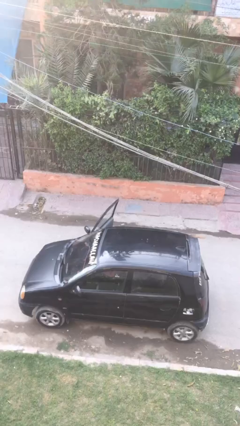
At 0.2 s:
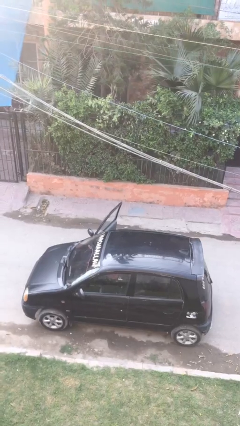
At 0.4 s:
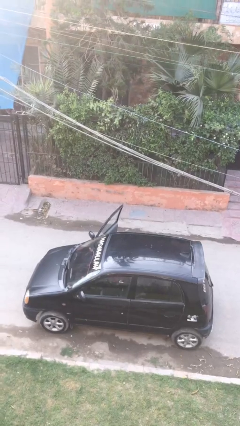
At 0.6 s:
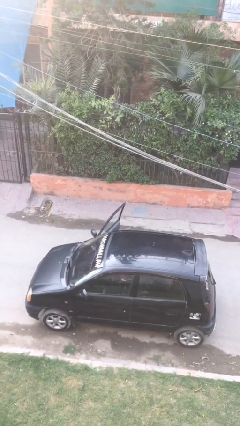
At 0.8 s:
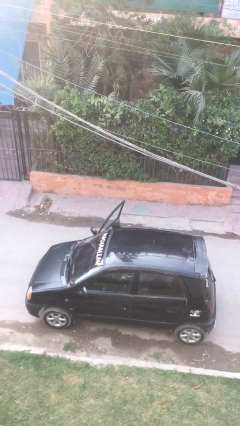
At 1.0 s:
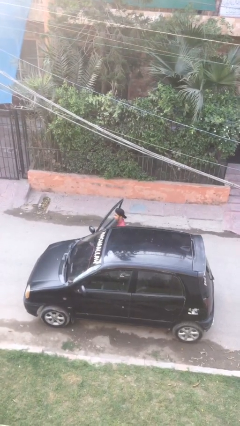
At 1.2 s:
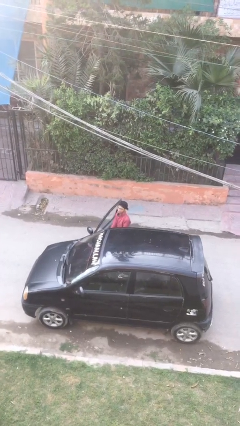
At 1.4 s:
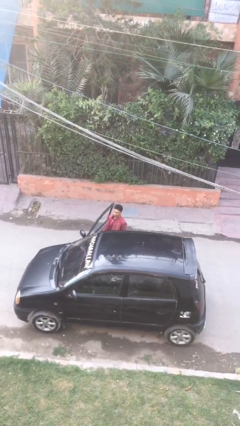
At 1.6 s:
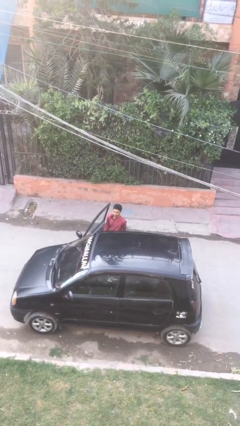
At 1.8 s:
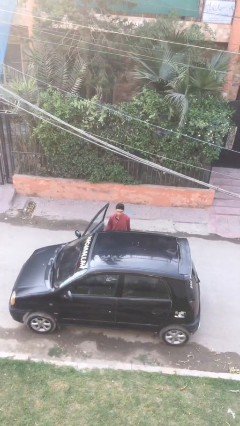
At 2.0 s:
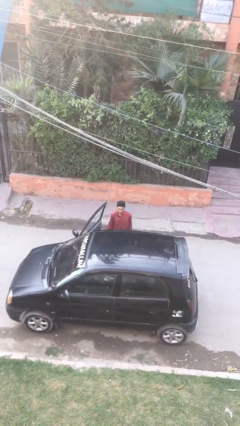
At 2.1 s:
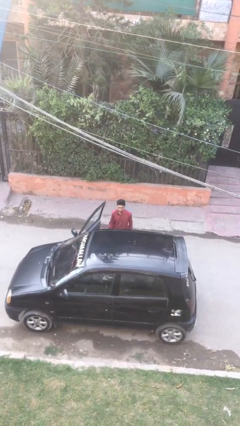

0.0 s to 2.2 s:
person exits car

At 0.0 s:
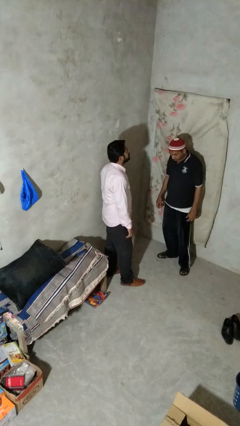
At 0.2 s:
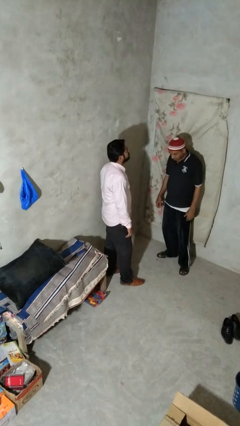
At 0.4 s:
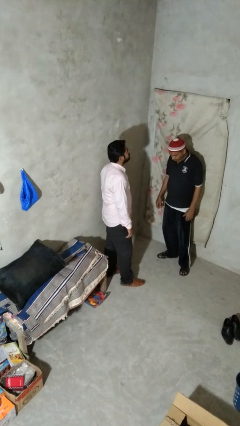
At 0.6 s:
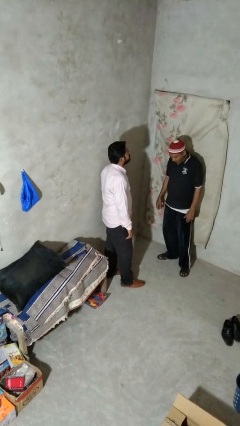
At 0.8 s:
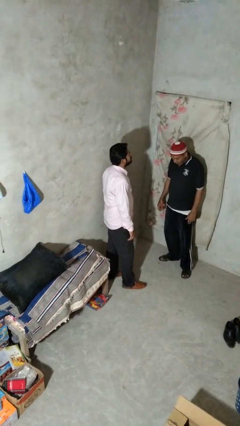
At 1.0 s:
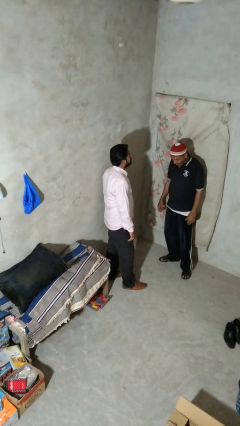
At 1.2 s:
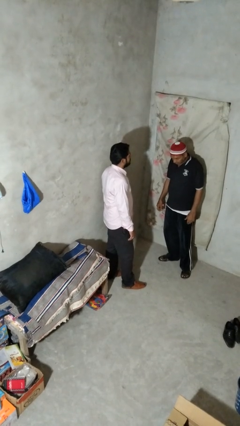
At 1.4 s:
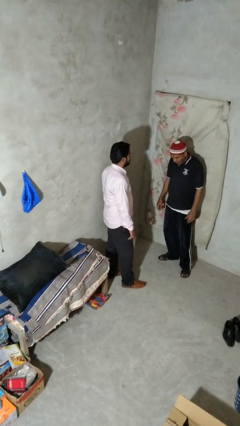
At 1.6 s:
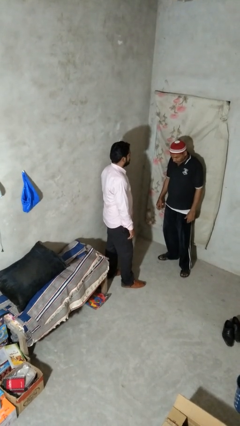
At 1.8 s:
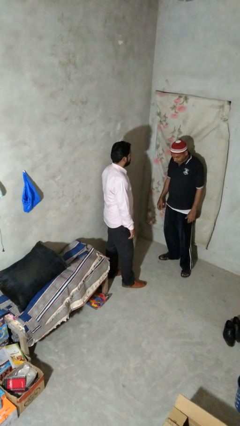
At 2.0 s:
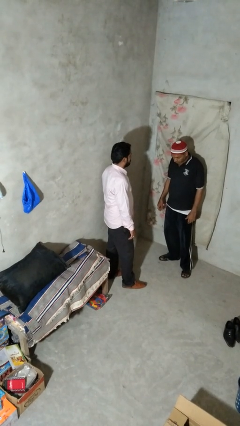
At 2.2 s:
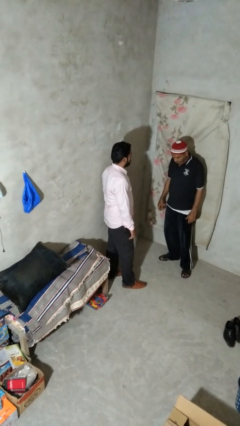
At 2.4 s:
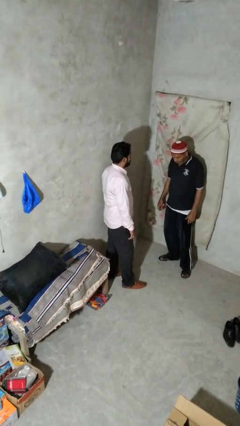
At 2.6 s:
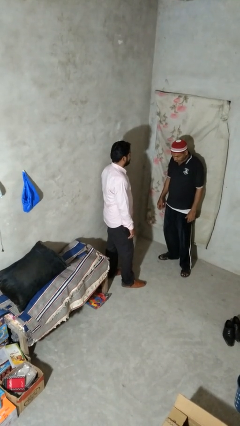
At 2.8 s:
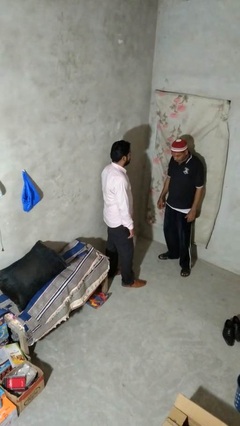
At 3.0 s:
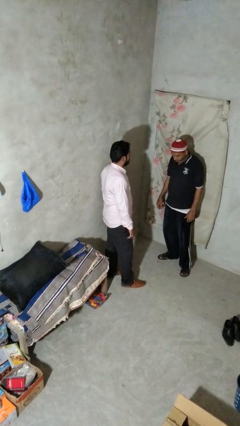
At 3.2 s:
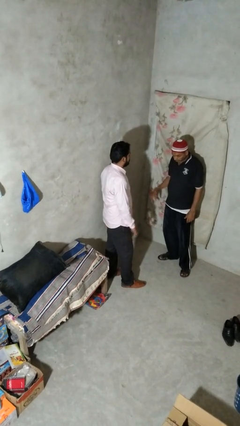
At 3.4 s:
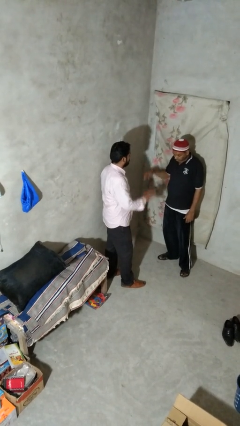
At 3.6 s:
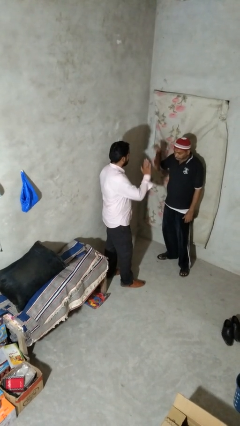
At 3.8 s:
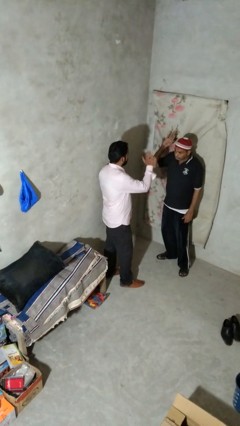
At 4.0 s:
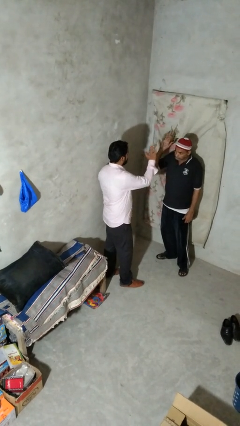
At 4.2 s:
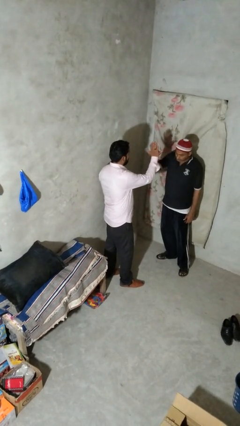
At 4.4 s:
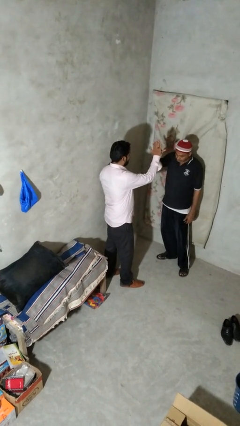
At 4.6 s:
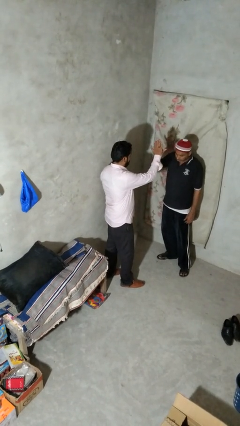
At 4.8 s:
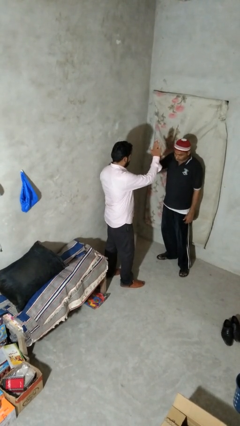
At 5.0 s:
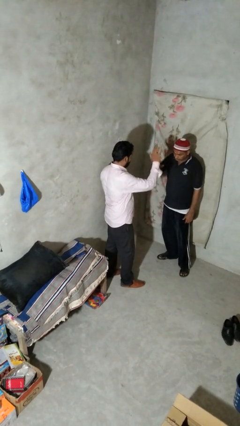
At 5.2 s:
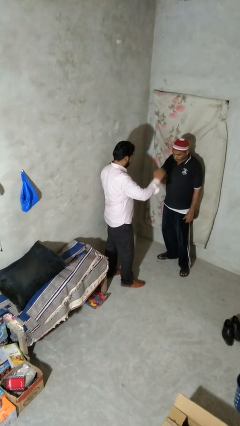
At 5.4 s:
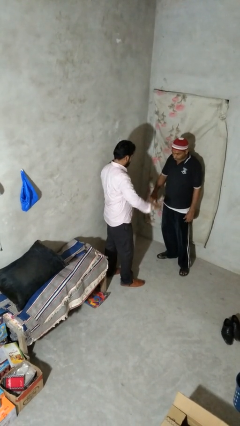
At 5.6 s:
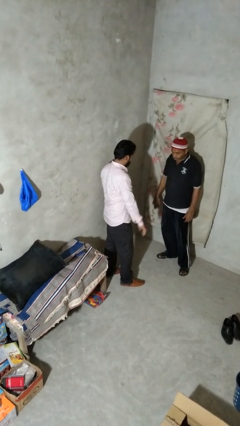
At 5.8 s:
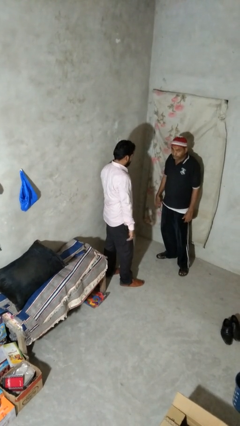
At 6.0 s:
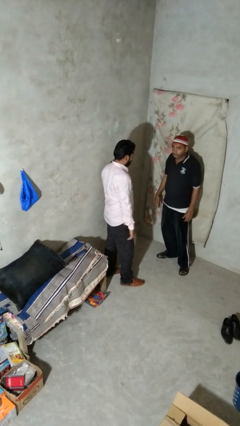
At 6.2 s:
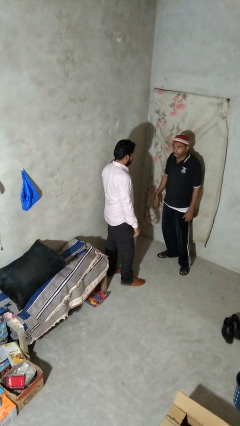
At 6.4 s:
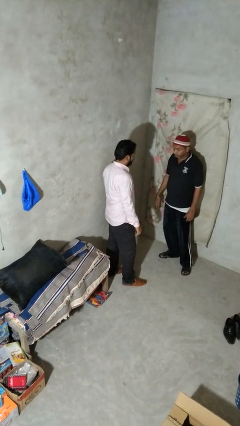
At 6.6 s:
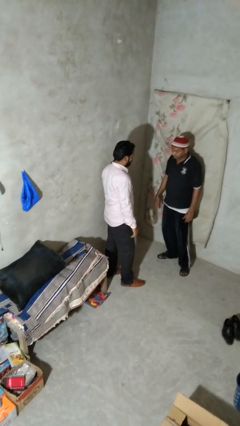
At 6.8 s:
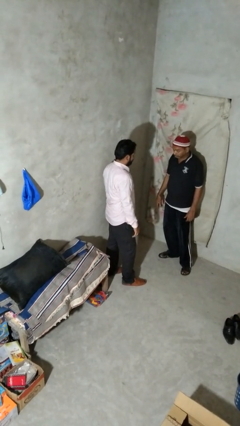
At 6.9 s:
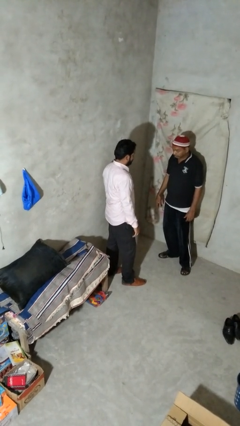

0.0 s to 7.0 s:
person highfives hand

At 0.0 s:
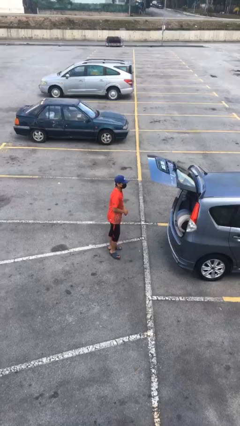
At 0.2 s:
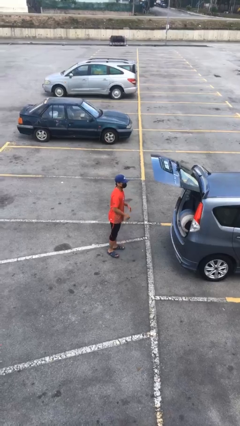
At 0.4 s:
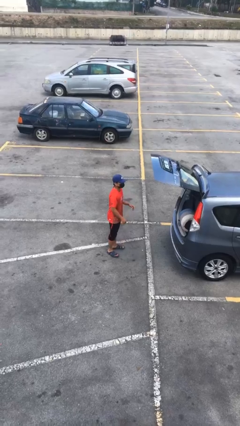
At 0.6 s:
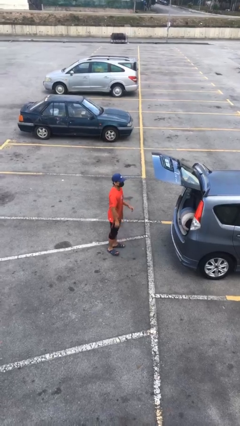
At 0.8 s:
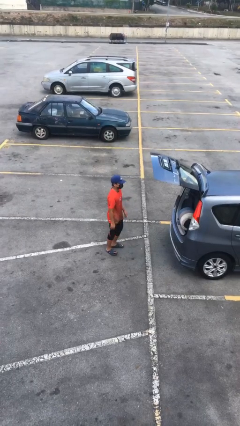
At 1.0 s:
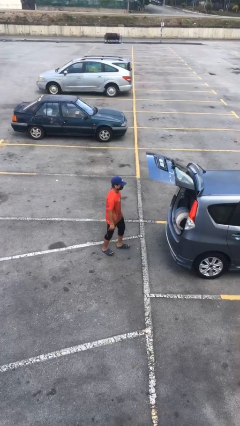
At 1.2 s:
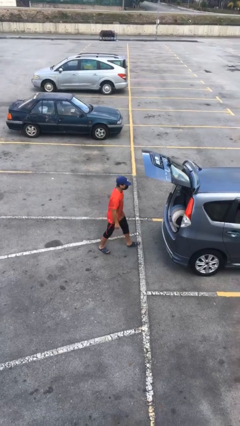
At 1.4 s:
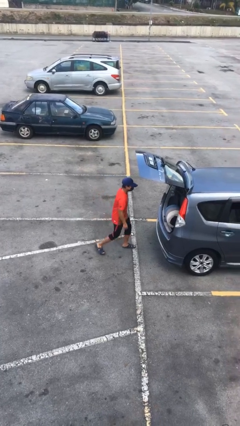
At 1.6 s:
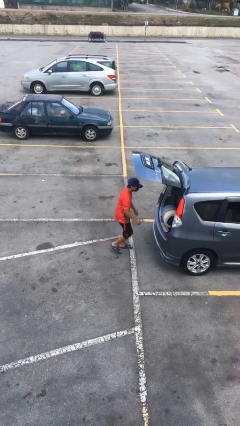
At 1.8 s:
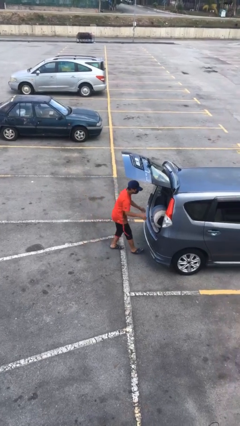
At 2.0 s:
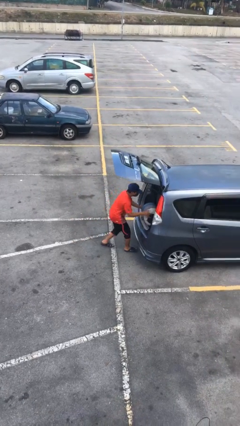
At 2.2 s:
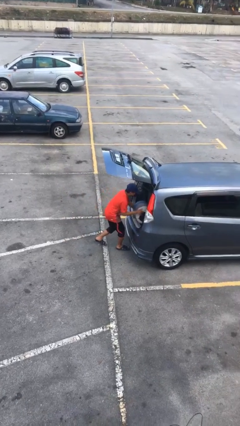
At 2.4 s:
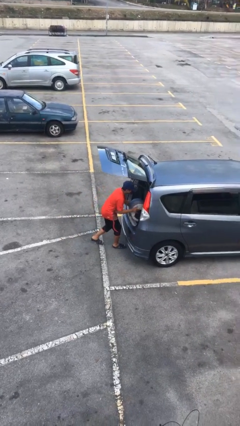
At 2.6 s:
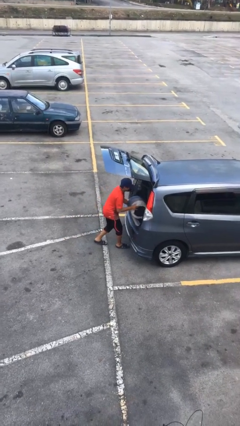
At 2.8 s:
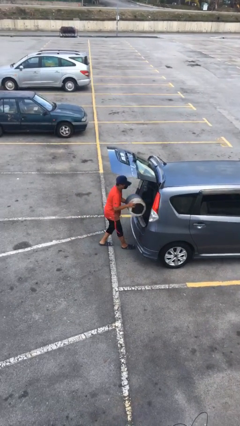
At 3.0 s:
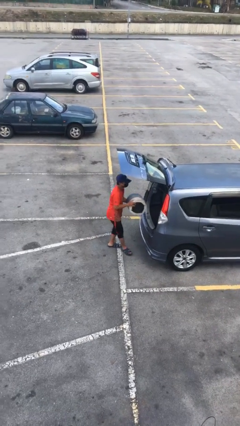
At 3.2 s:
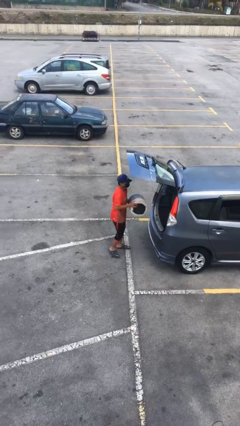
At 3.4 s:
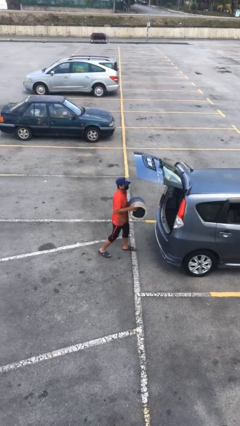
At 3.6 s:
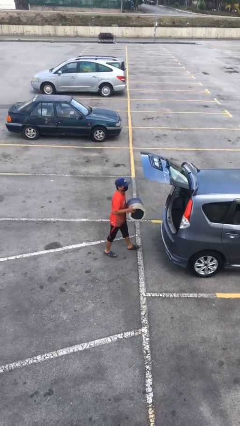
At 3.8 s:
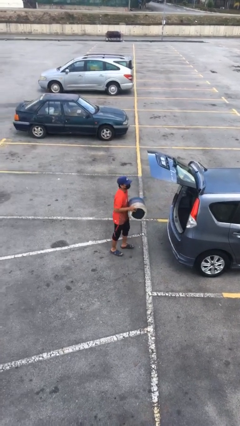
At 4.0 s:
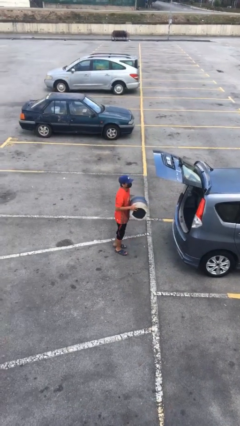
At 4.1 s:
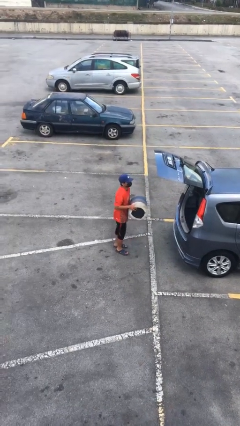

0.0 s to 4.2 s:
person unloads car

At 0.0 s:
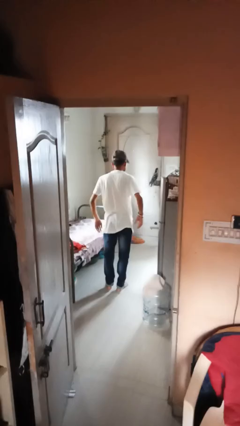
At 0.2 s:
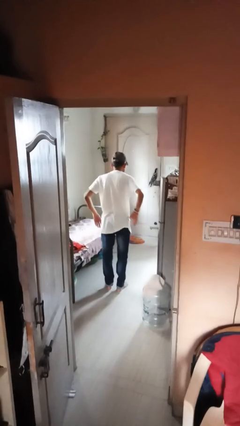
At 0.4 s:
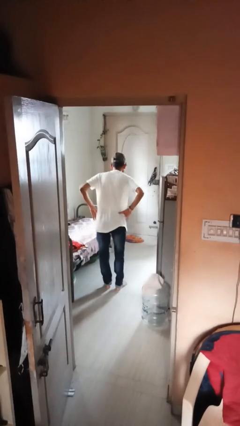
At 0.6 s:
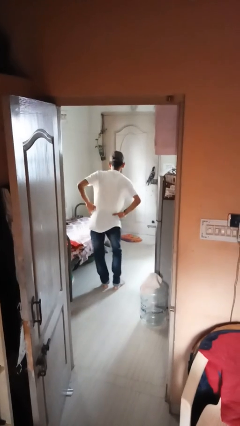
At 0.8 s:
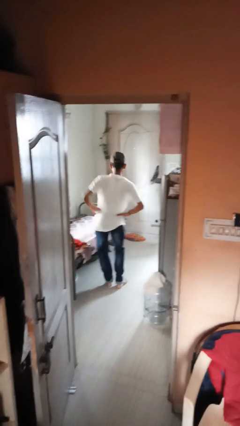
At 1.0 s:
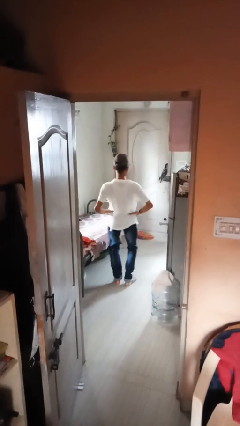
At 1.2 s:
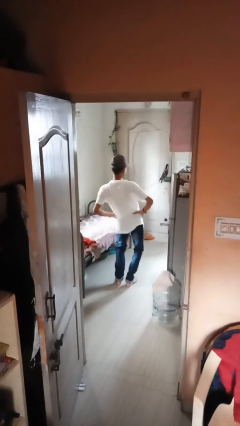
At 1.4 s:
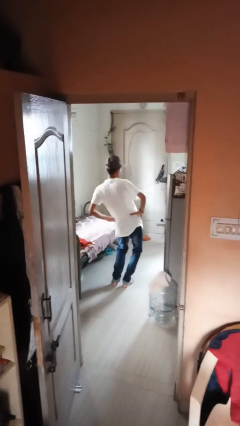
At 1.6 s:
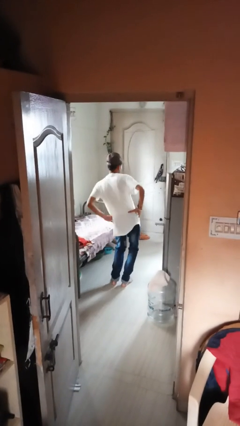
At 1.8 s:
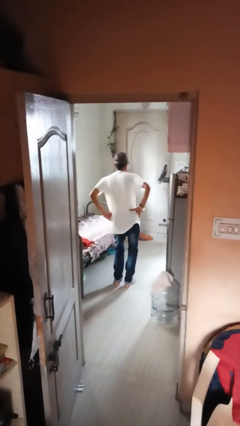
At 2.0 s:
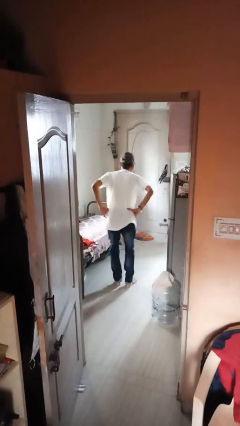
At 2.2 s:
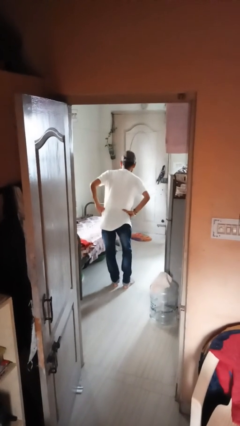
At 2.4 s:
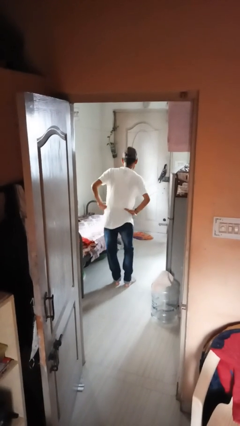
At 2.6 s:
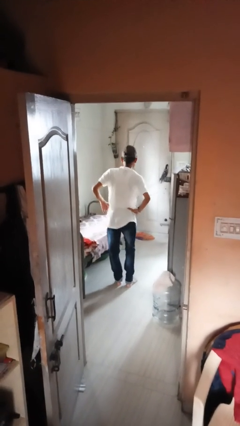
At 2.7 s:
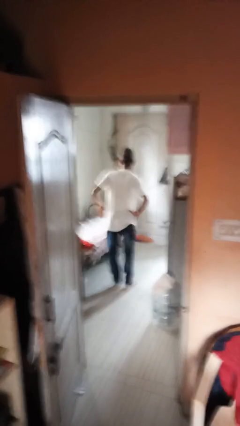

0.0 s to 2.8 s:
person wiggles hips

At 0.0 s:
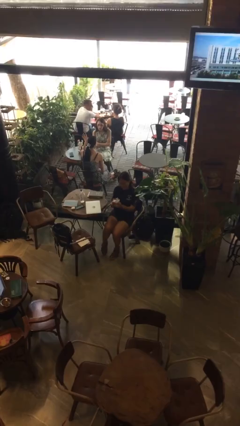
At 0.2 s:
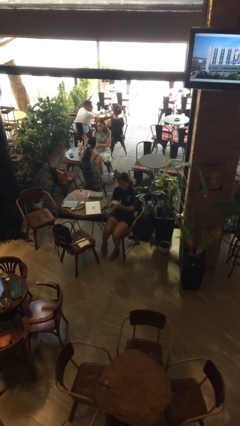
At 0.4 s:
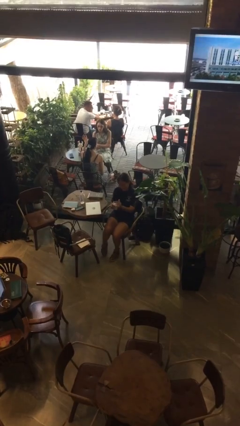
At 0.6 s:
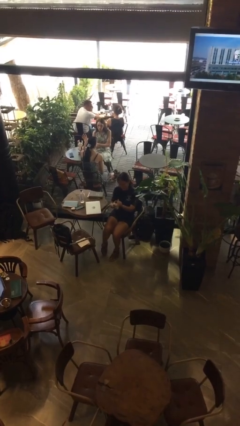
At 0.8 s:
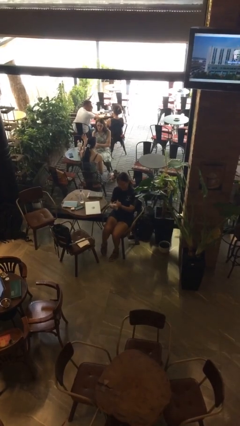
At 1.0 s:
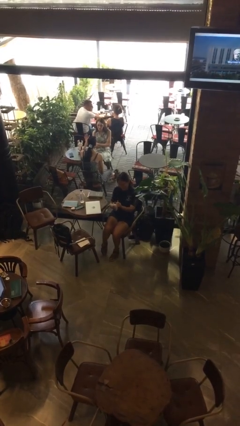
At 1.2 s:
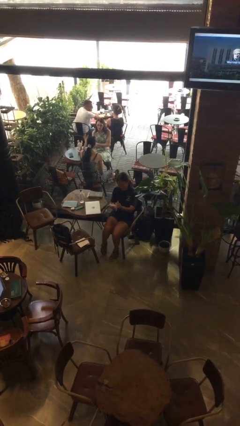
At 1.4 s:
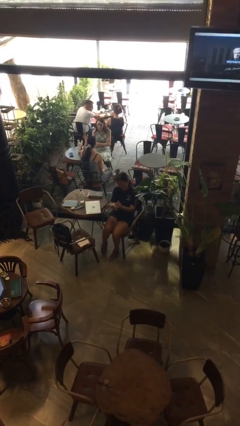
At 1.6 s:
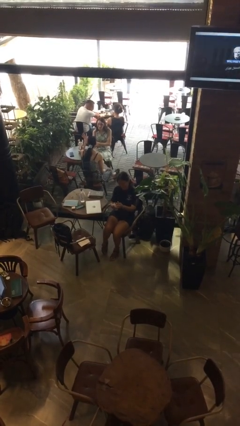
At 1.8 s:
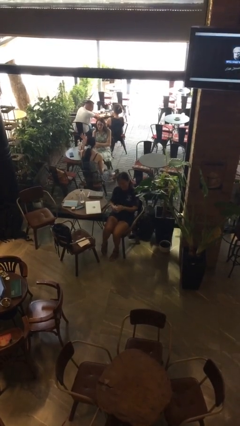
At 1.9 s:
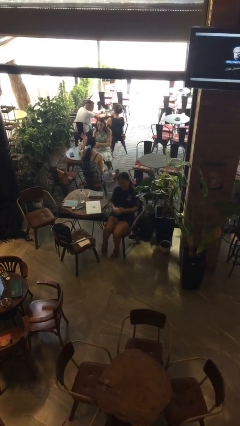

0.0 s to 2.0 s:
person squeezes object
